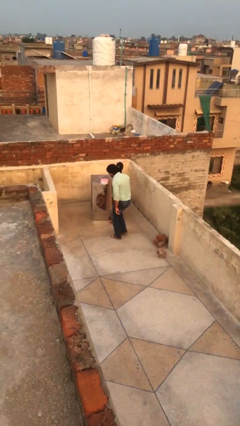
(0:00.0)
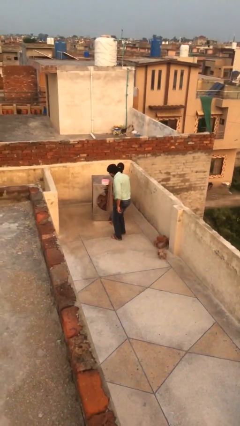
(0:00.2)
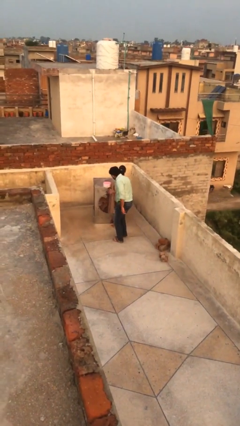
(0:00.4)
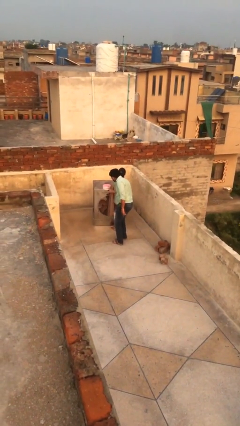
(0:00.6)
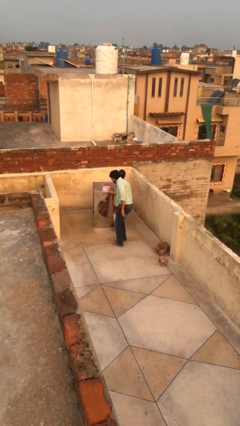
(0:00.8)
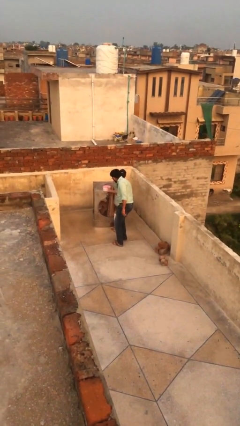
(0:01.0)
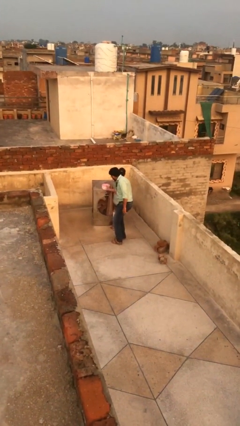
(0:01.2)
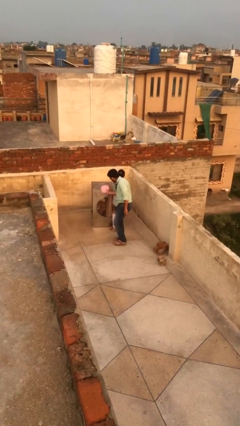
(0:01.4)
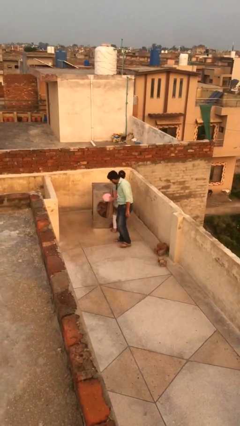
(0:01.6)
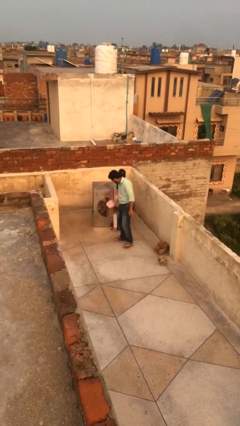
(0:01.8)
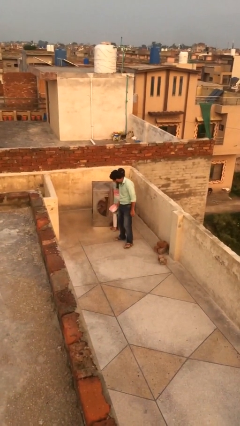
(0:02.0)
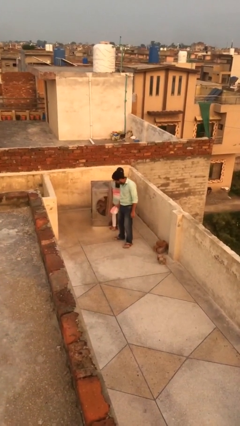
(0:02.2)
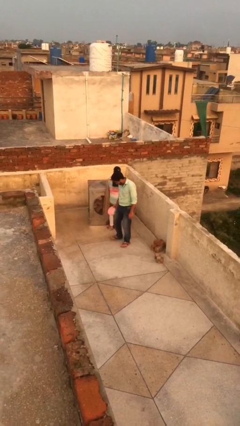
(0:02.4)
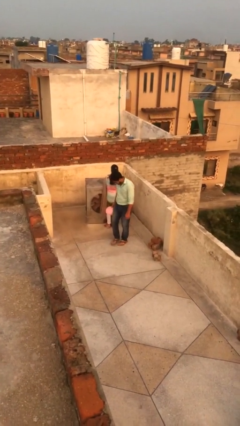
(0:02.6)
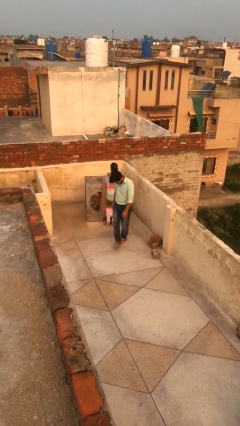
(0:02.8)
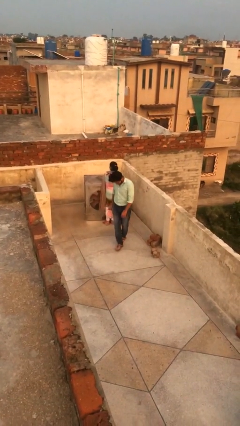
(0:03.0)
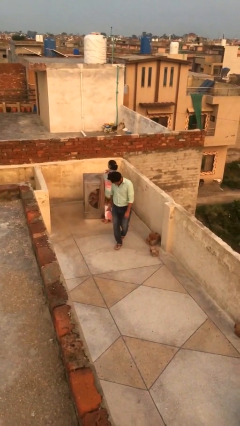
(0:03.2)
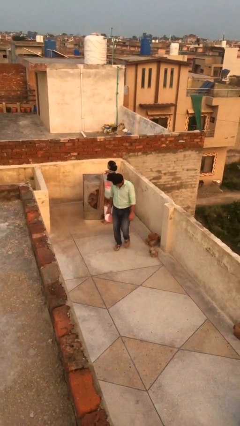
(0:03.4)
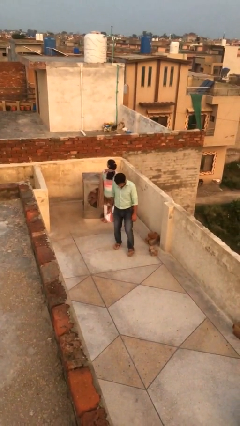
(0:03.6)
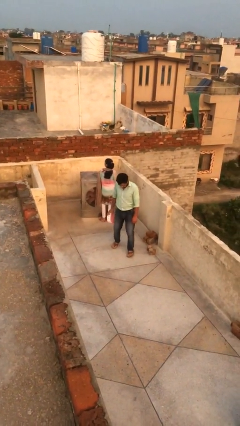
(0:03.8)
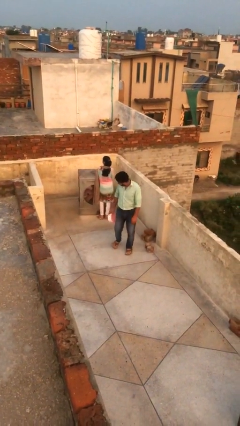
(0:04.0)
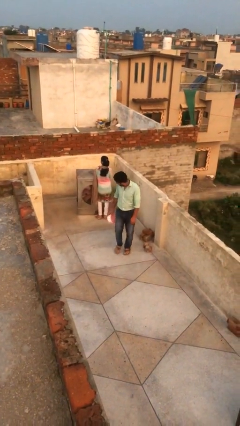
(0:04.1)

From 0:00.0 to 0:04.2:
person steals object from person

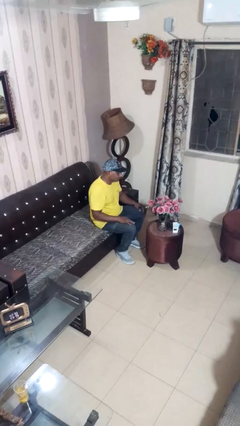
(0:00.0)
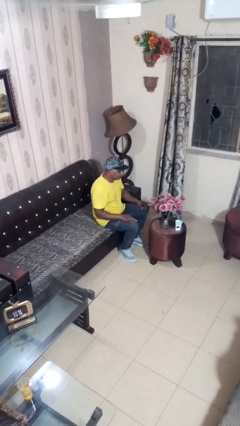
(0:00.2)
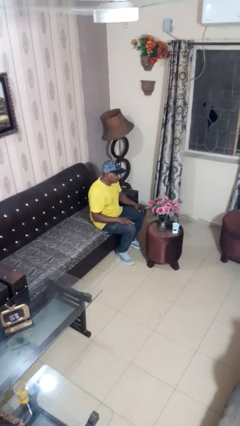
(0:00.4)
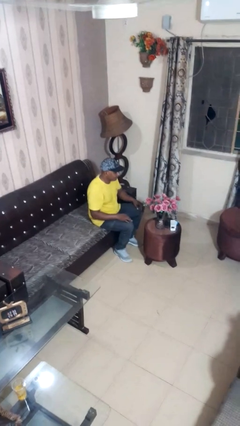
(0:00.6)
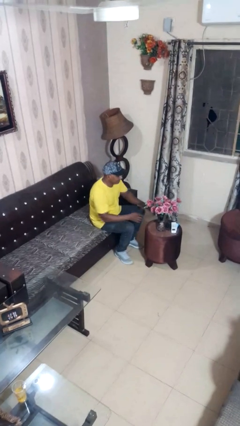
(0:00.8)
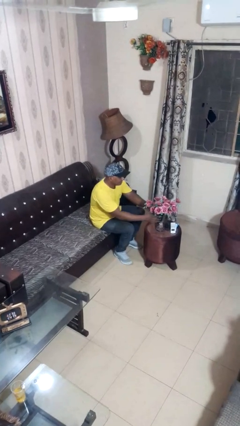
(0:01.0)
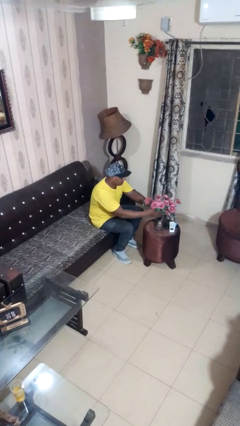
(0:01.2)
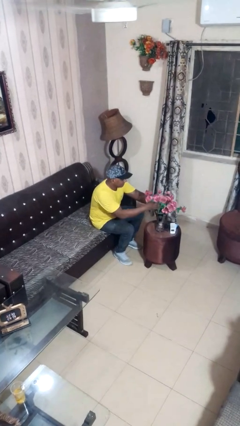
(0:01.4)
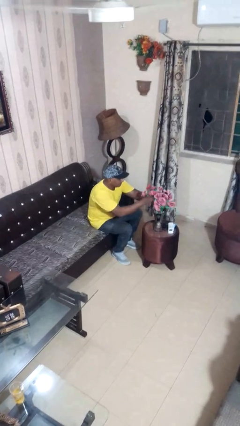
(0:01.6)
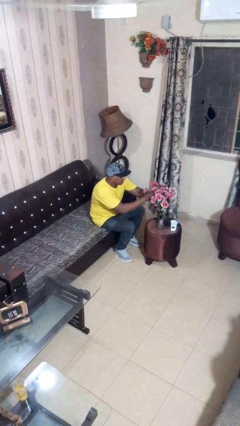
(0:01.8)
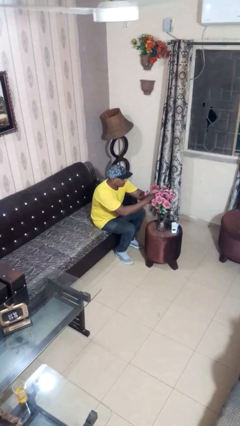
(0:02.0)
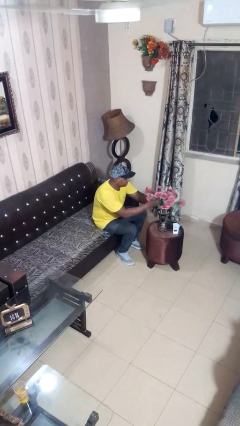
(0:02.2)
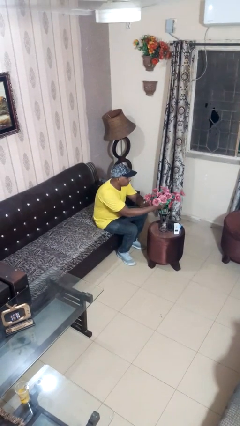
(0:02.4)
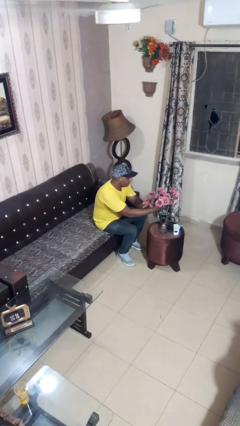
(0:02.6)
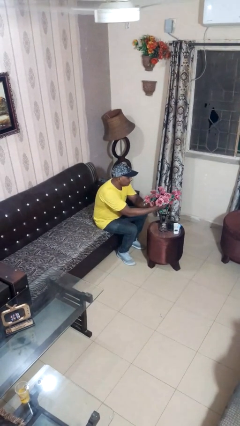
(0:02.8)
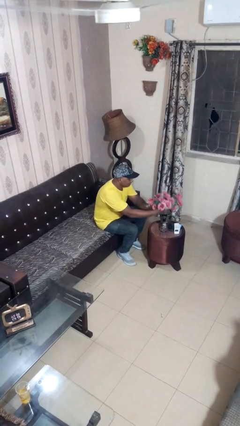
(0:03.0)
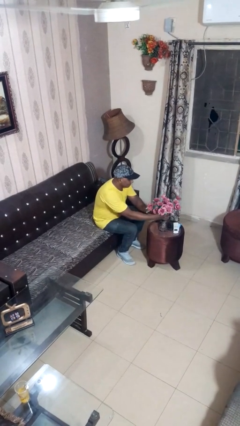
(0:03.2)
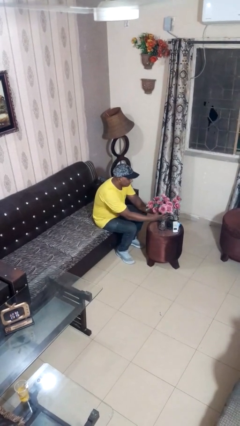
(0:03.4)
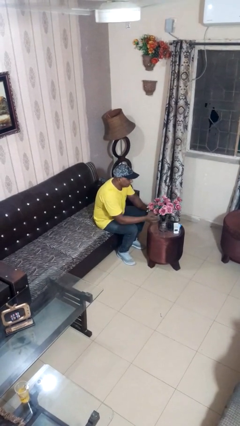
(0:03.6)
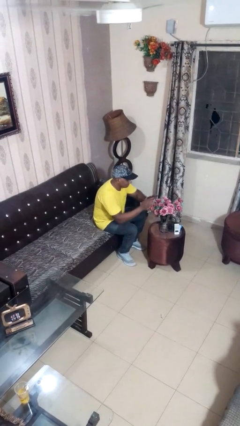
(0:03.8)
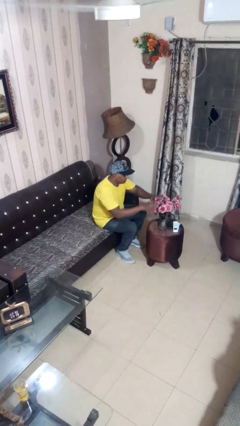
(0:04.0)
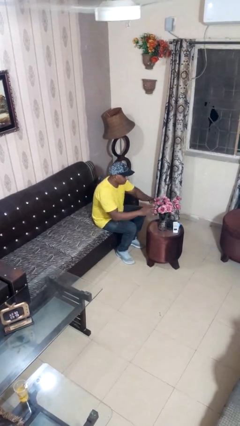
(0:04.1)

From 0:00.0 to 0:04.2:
person arranges flowers in vase

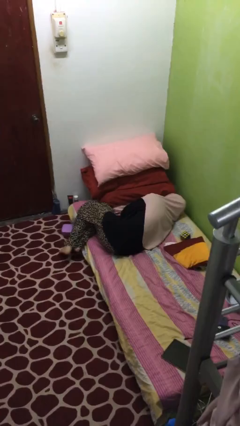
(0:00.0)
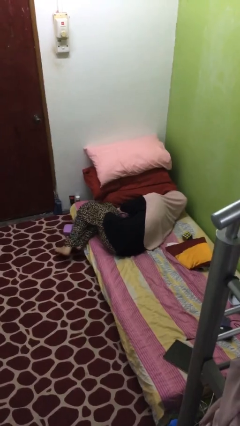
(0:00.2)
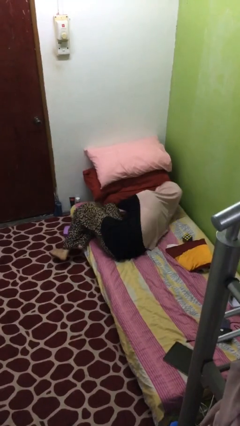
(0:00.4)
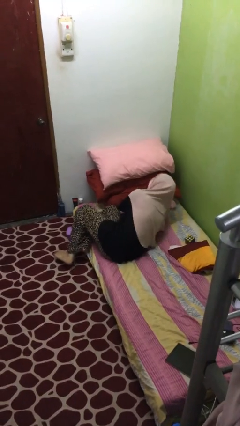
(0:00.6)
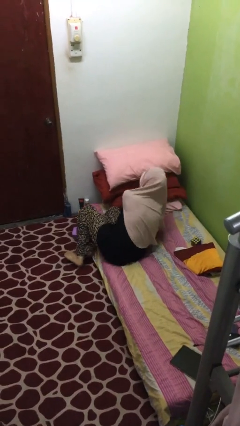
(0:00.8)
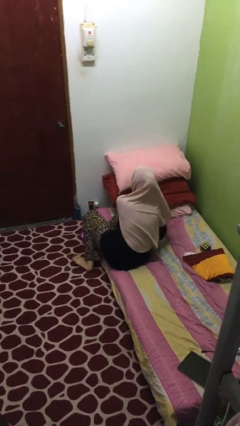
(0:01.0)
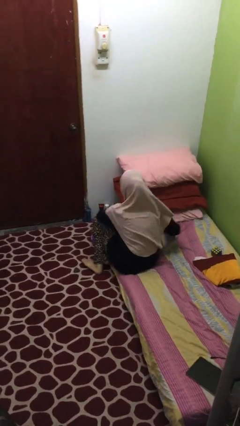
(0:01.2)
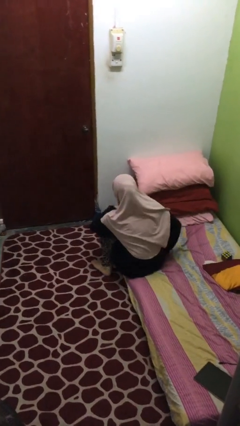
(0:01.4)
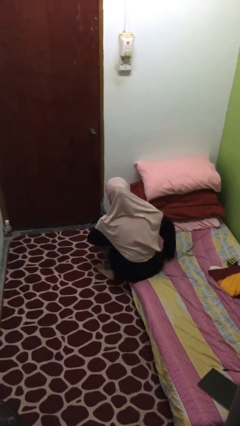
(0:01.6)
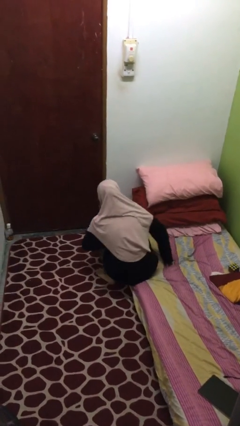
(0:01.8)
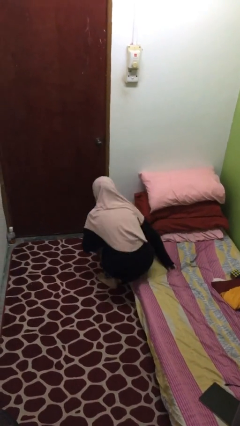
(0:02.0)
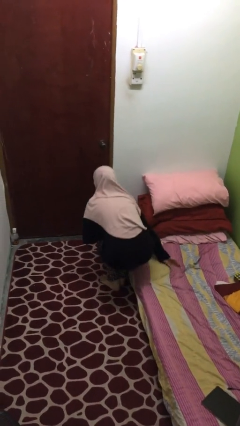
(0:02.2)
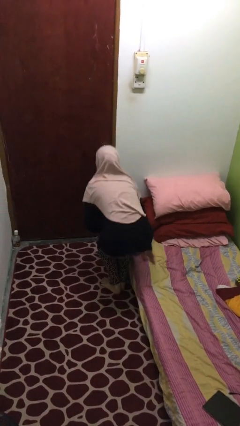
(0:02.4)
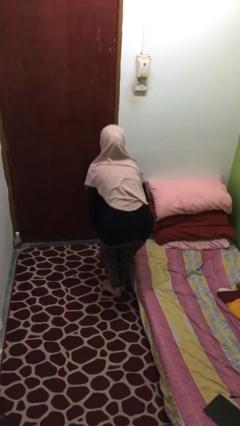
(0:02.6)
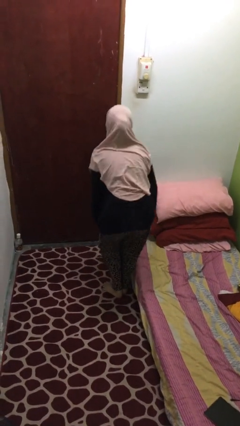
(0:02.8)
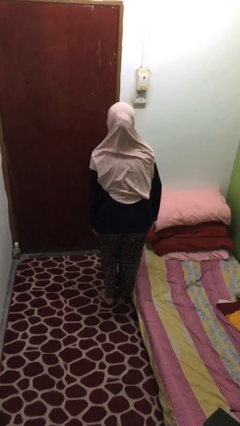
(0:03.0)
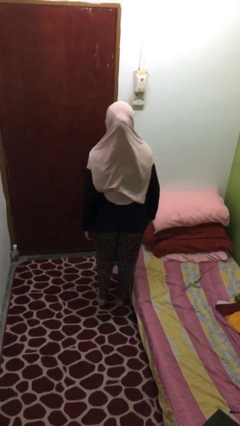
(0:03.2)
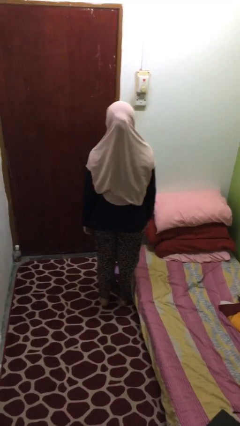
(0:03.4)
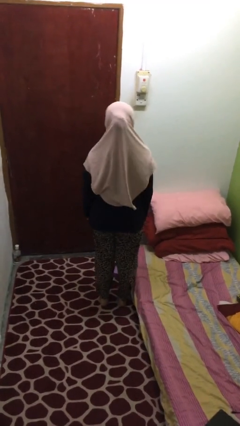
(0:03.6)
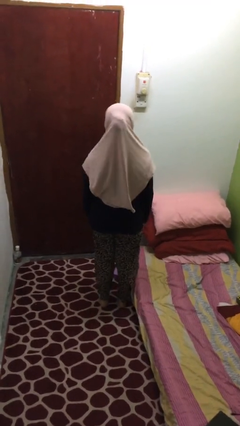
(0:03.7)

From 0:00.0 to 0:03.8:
person stands up

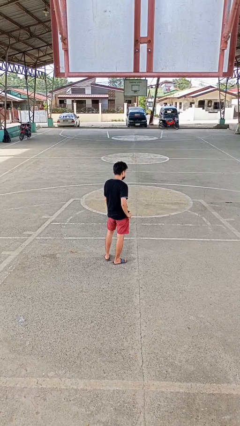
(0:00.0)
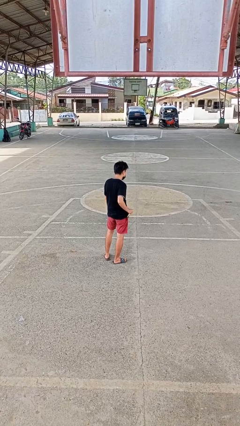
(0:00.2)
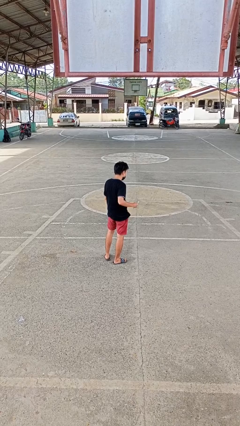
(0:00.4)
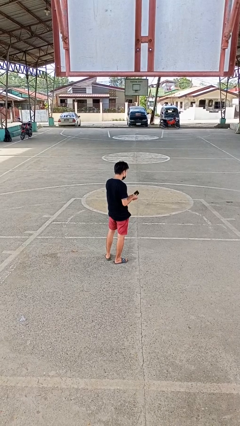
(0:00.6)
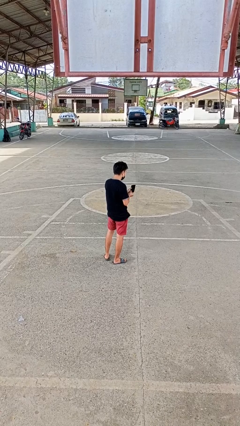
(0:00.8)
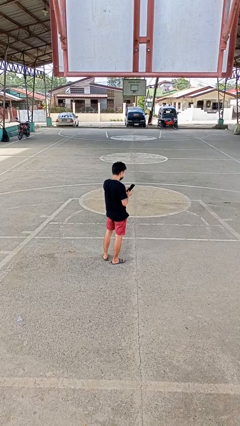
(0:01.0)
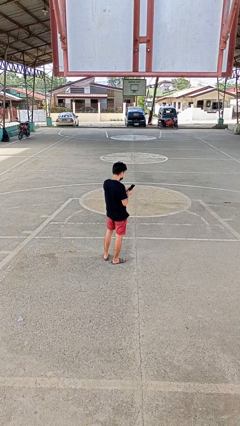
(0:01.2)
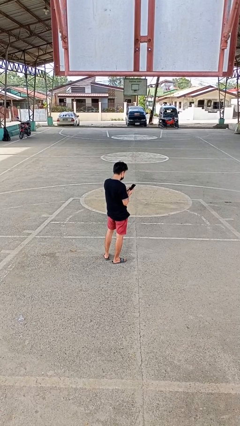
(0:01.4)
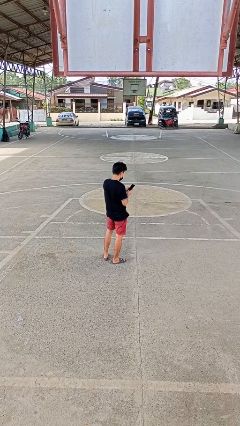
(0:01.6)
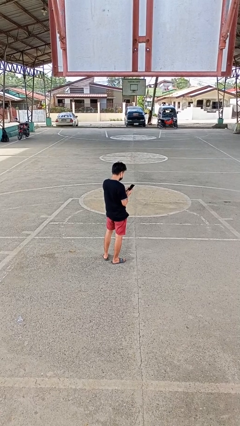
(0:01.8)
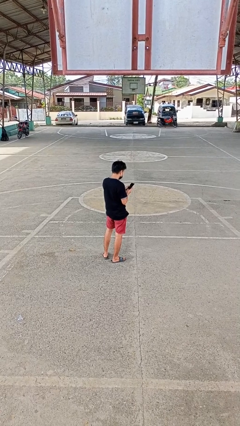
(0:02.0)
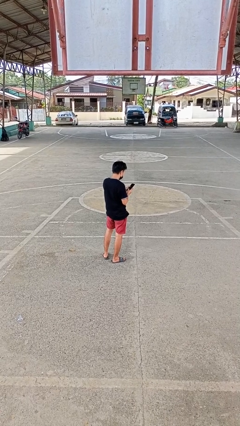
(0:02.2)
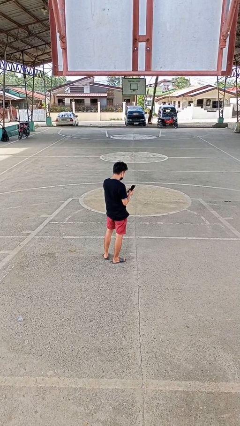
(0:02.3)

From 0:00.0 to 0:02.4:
person takes phone from pocket

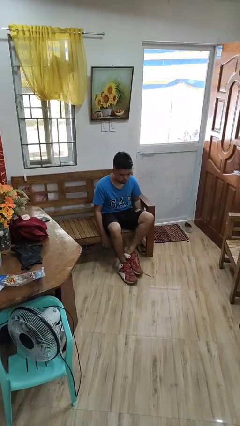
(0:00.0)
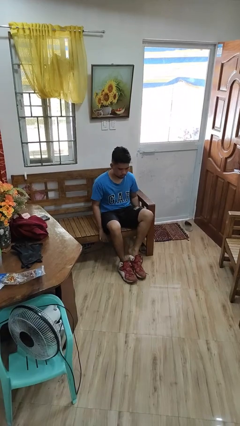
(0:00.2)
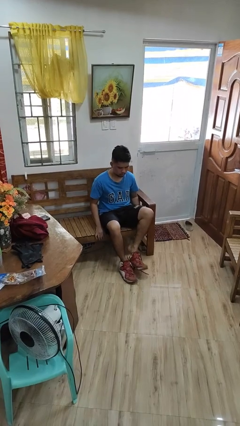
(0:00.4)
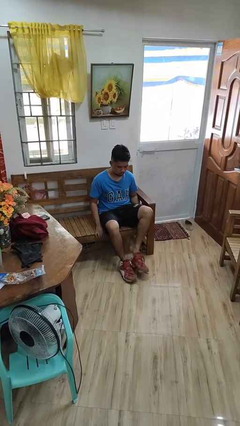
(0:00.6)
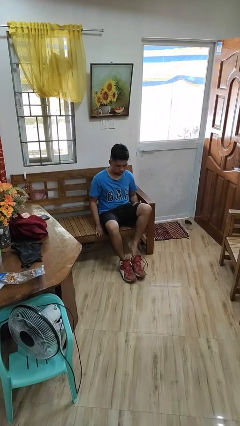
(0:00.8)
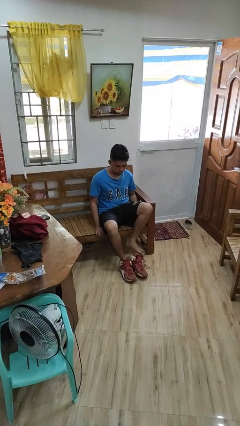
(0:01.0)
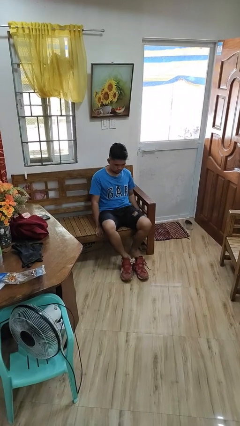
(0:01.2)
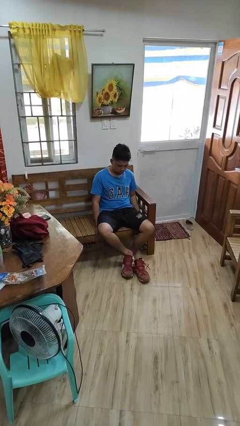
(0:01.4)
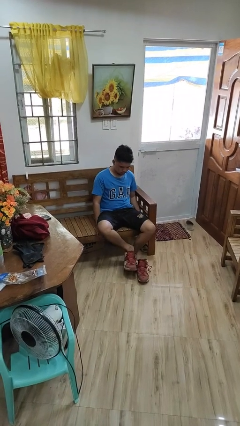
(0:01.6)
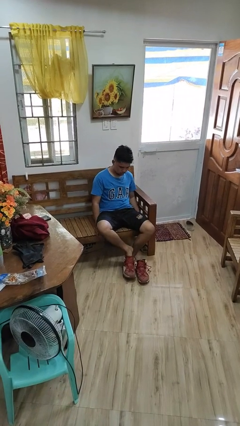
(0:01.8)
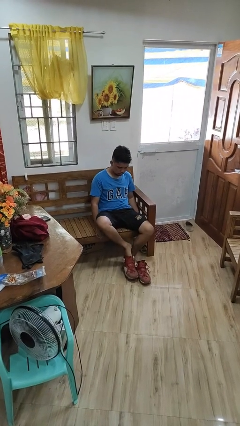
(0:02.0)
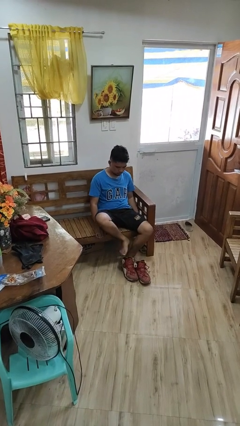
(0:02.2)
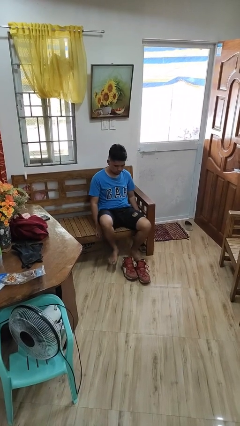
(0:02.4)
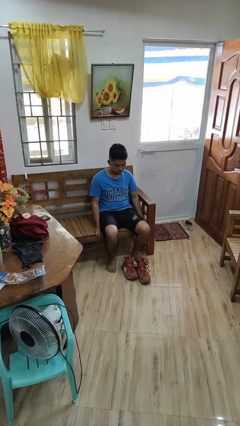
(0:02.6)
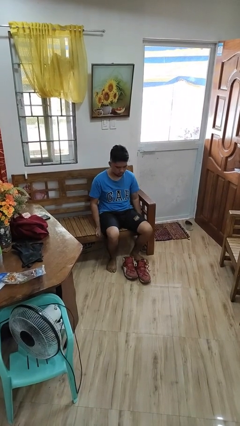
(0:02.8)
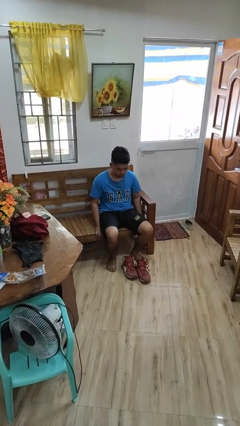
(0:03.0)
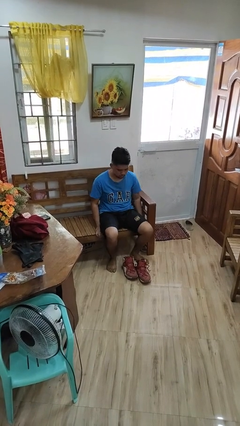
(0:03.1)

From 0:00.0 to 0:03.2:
person takes off shoes
